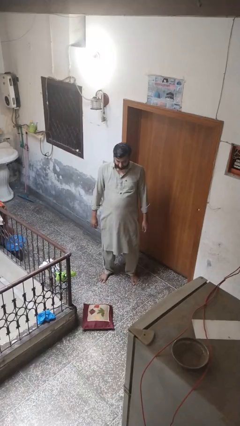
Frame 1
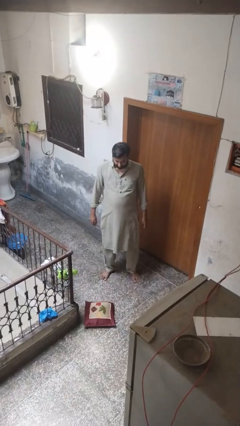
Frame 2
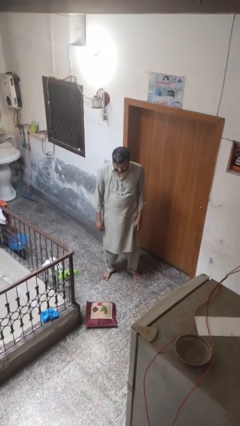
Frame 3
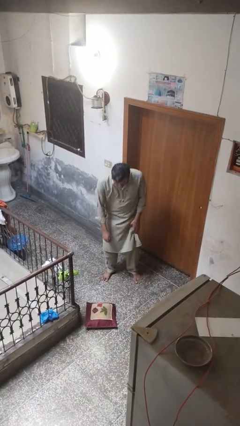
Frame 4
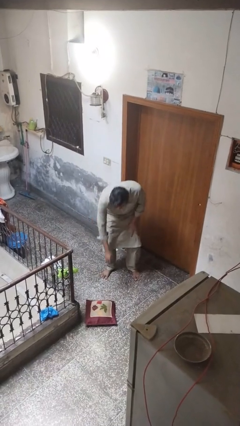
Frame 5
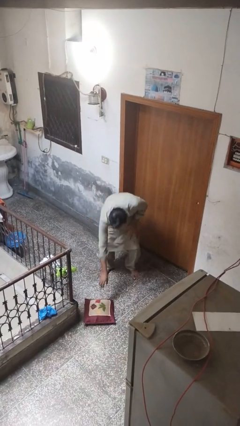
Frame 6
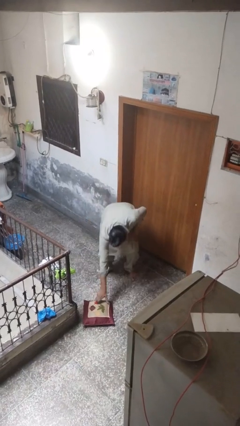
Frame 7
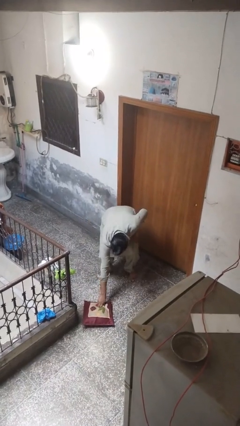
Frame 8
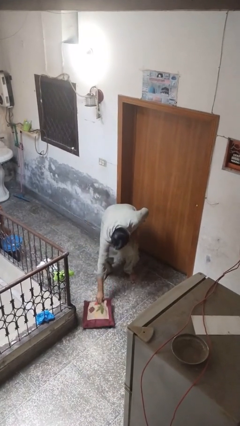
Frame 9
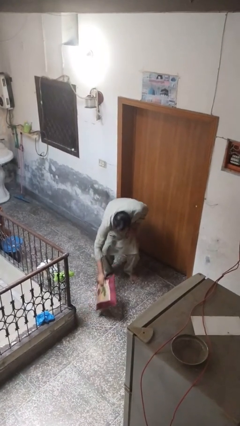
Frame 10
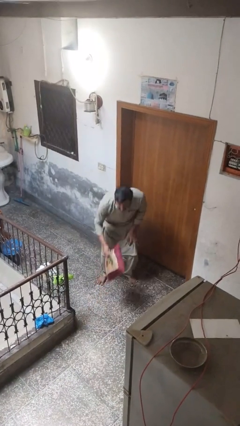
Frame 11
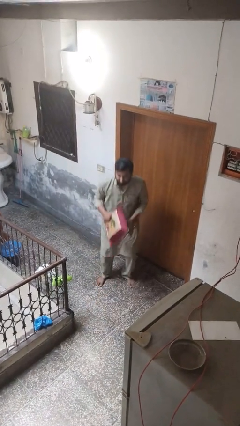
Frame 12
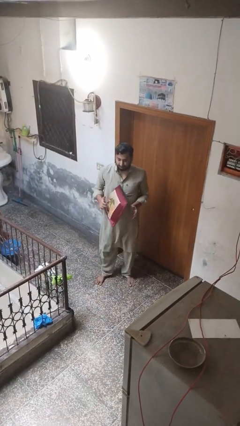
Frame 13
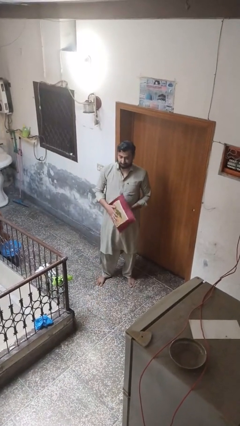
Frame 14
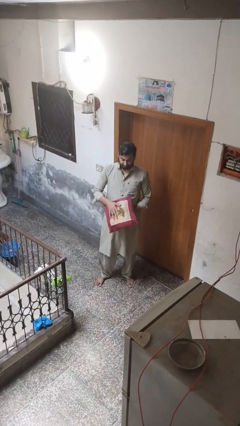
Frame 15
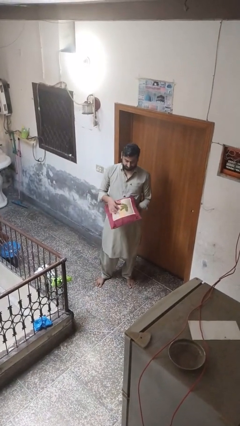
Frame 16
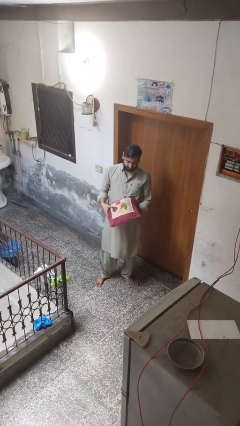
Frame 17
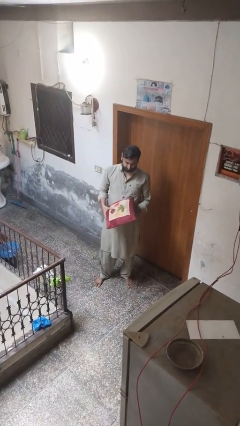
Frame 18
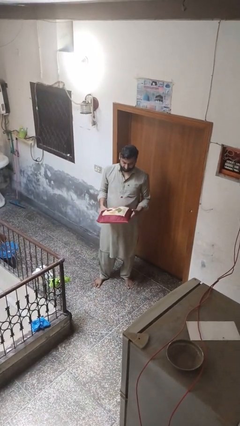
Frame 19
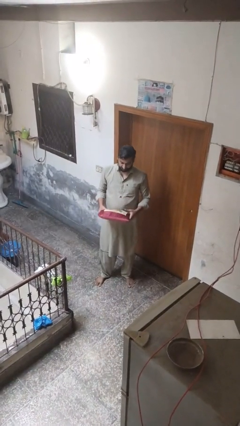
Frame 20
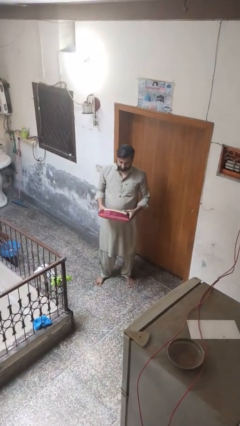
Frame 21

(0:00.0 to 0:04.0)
person picks up object from floor

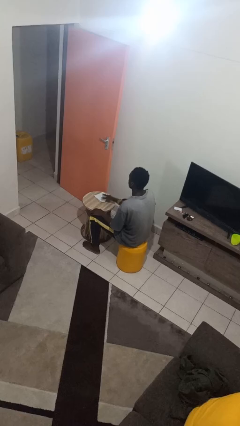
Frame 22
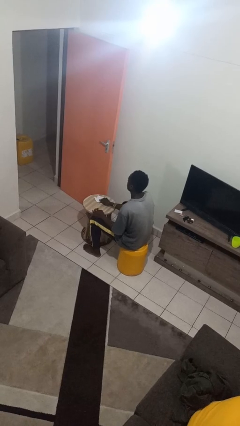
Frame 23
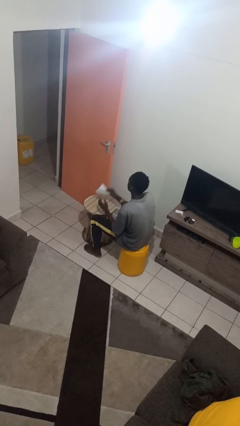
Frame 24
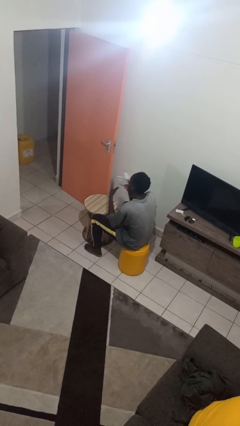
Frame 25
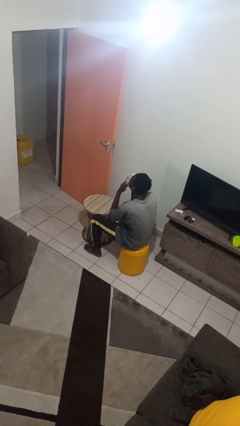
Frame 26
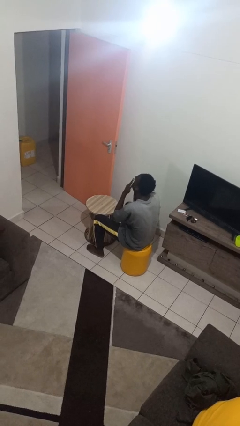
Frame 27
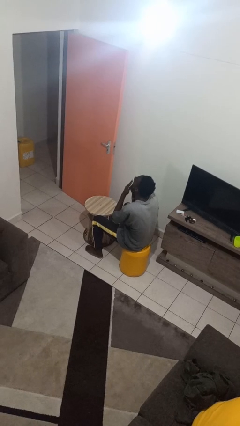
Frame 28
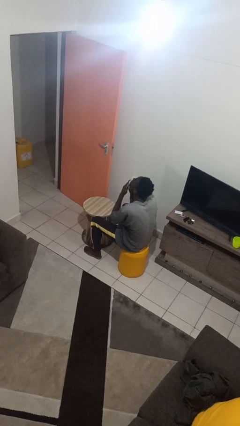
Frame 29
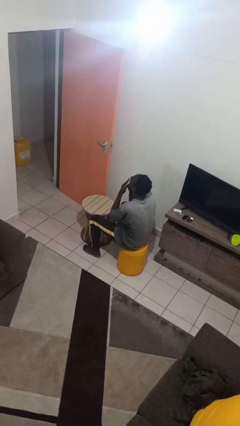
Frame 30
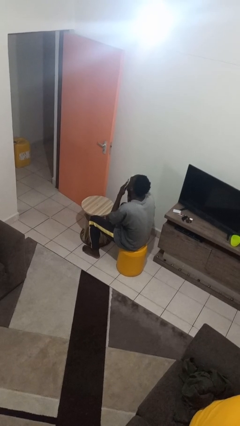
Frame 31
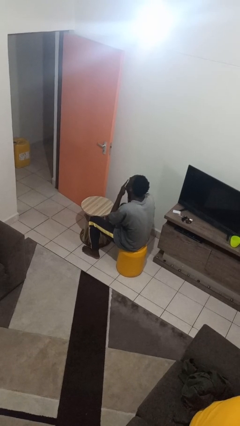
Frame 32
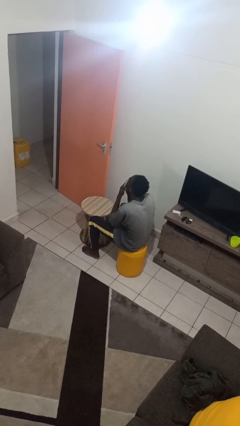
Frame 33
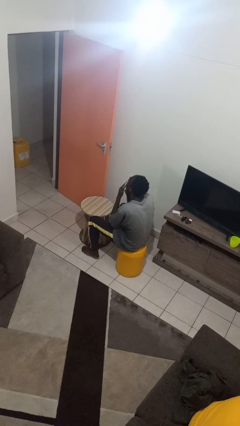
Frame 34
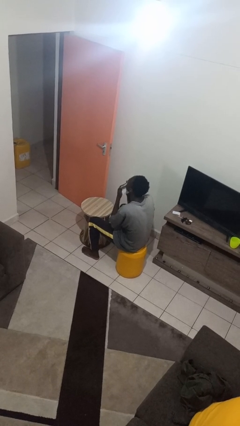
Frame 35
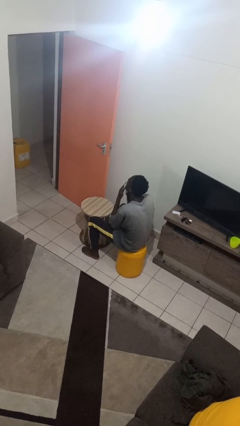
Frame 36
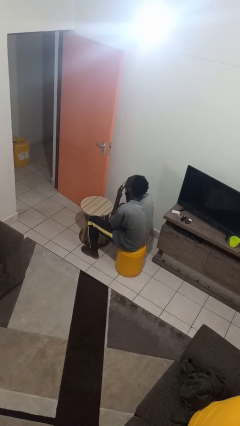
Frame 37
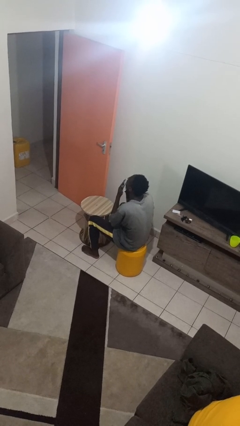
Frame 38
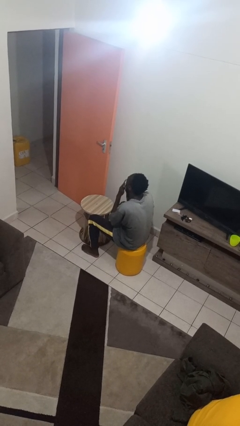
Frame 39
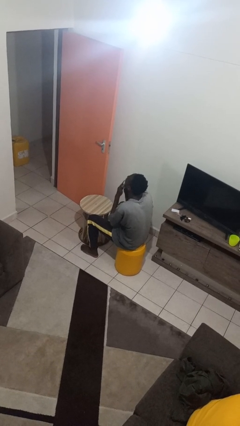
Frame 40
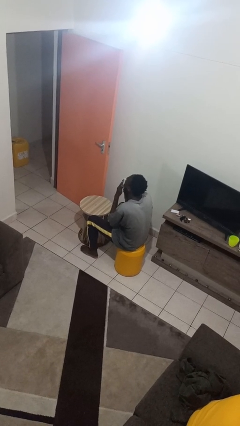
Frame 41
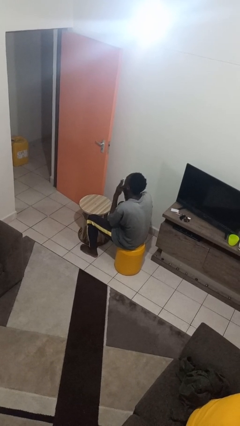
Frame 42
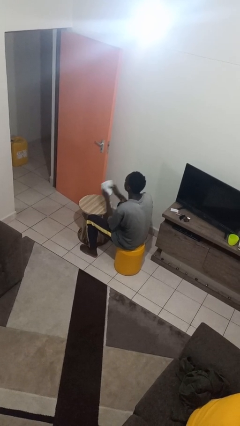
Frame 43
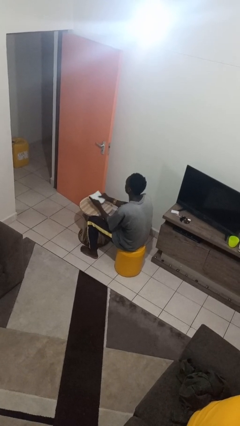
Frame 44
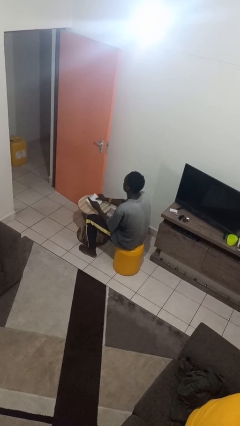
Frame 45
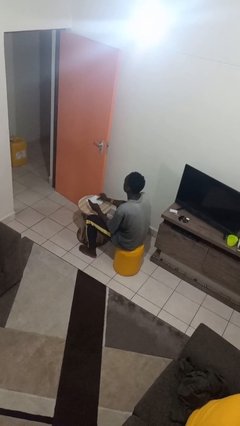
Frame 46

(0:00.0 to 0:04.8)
person wipes mouth with napkin

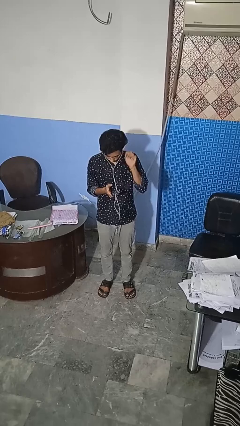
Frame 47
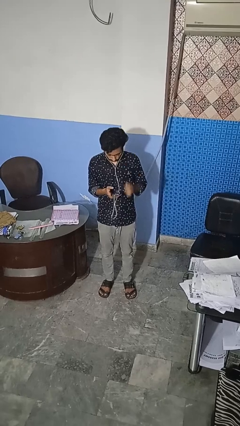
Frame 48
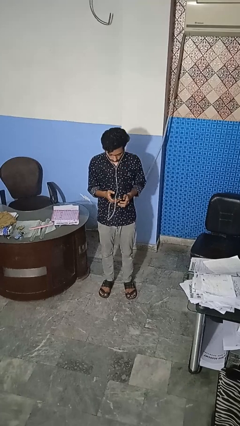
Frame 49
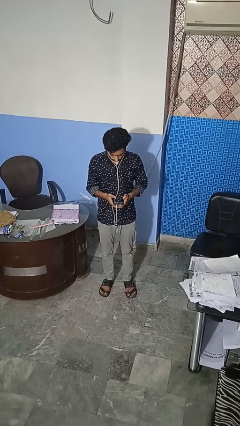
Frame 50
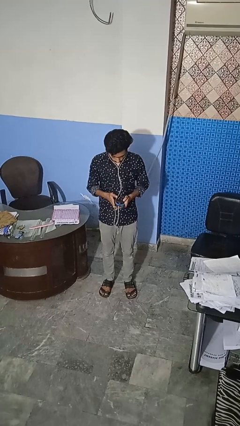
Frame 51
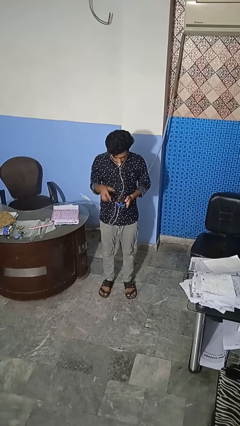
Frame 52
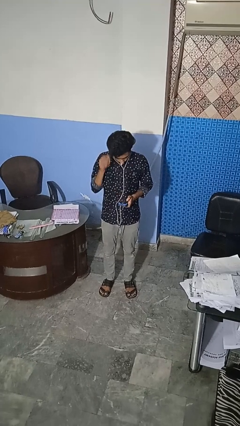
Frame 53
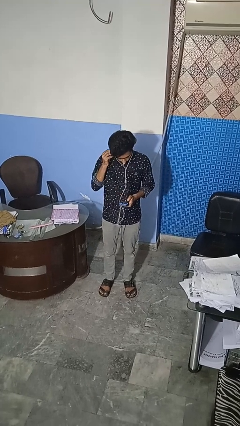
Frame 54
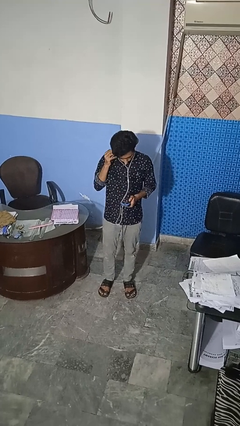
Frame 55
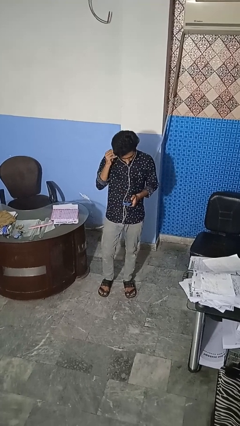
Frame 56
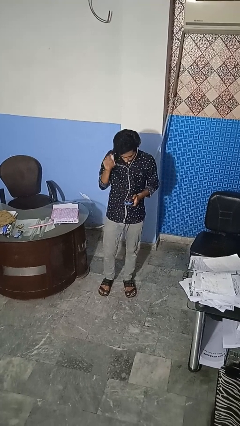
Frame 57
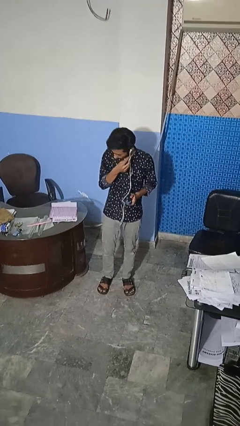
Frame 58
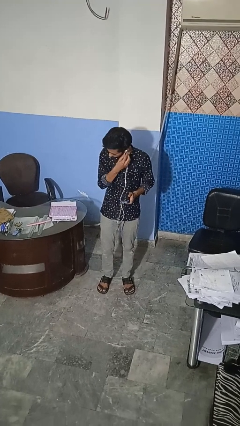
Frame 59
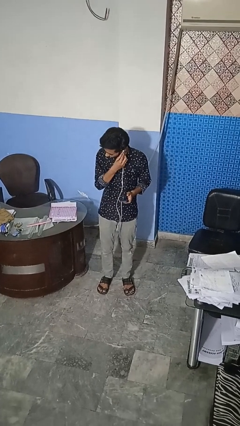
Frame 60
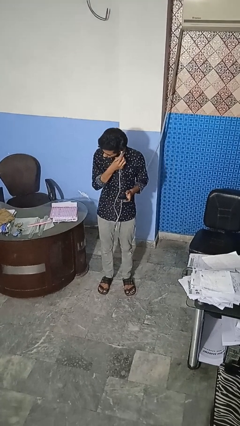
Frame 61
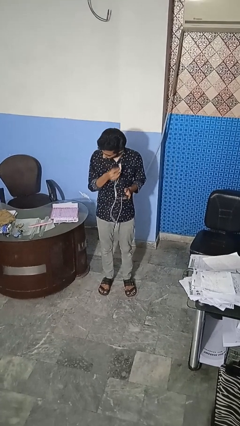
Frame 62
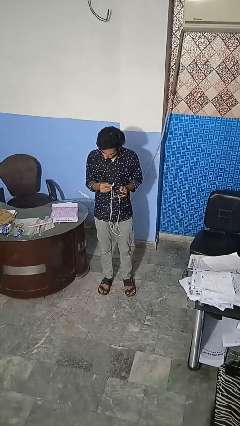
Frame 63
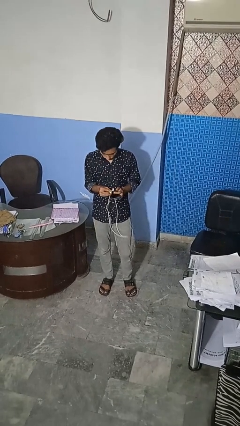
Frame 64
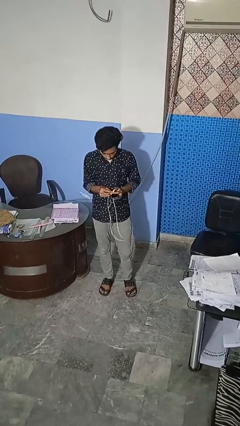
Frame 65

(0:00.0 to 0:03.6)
person takes off headphones

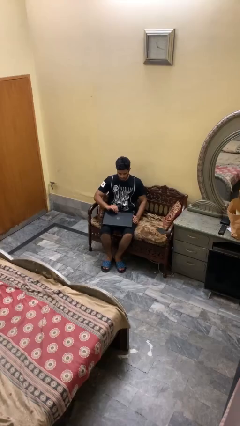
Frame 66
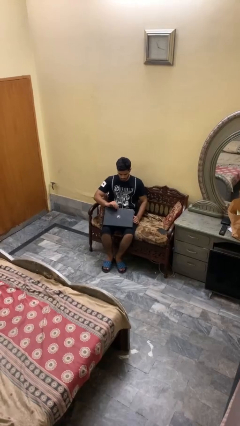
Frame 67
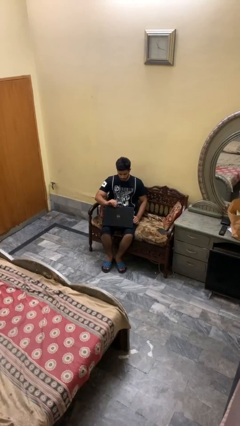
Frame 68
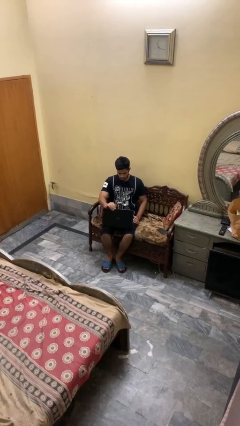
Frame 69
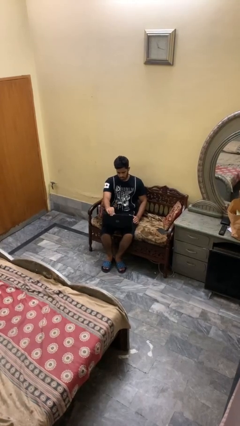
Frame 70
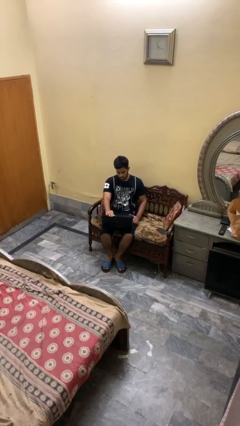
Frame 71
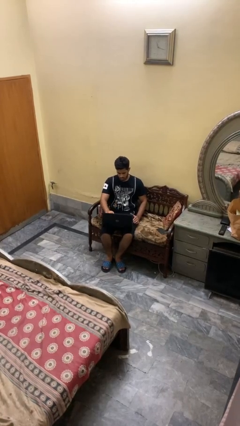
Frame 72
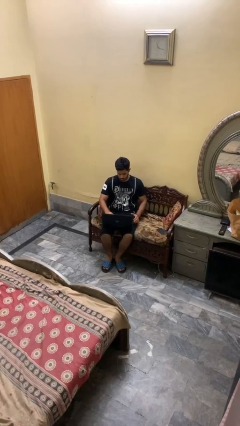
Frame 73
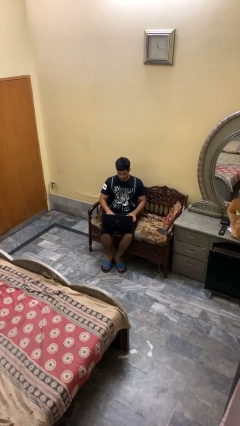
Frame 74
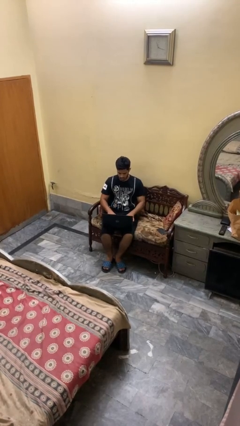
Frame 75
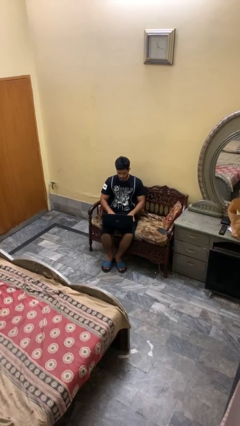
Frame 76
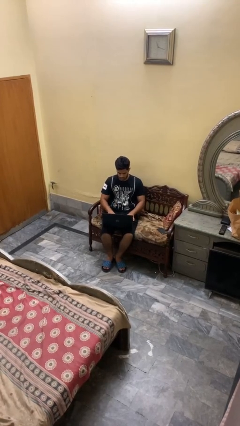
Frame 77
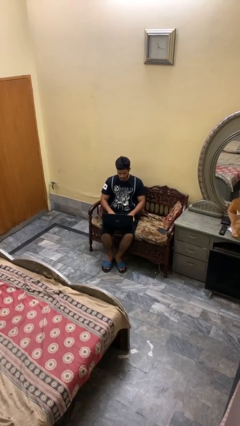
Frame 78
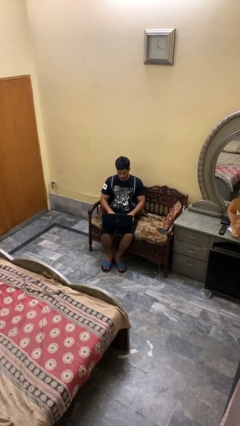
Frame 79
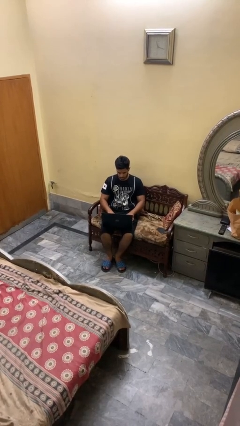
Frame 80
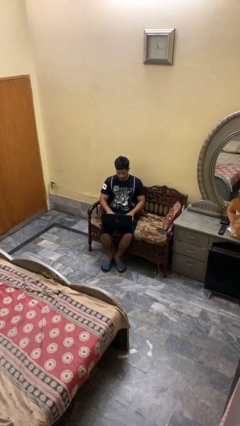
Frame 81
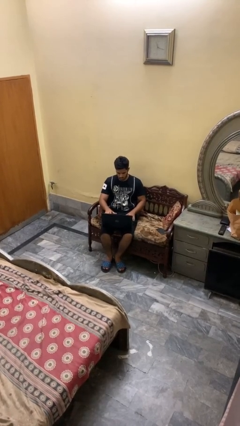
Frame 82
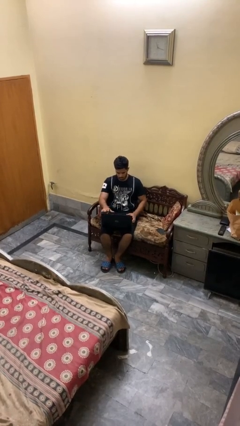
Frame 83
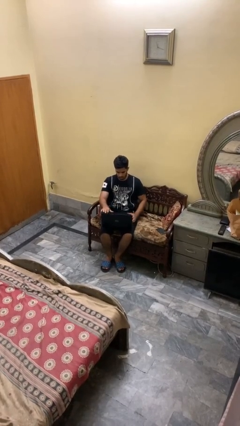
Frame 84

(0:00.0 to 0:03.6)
person opens laptop

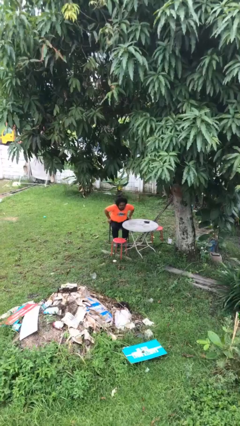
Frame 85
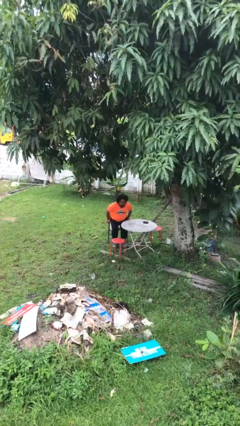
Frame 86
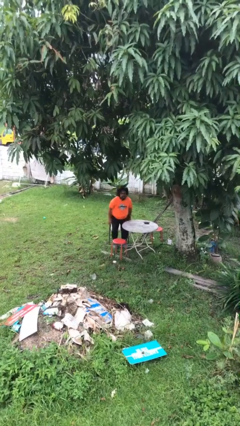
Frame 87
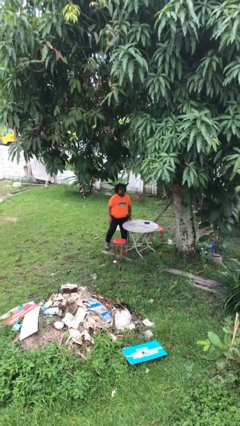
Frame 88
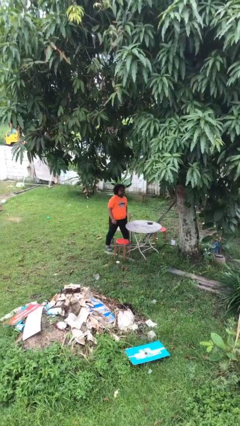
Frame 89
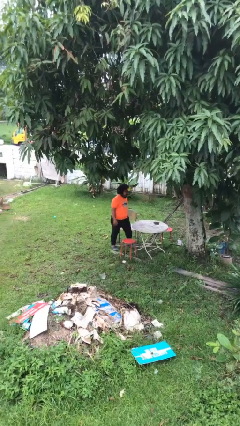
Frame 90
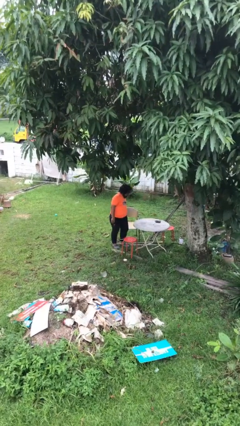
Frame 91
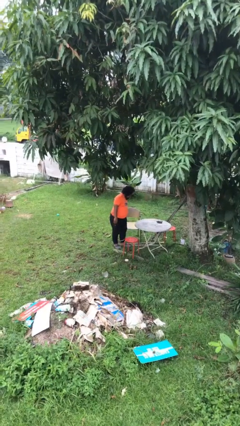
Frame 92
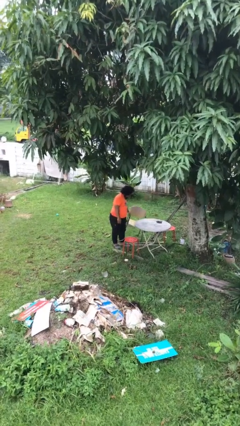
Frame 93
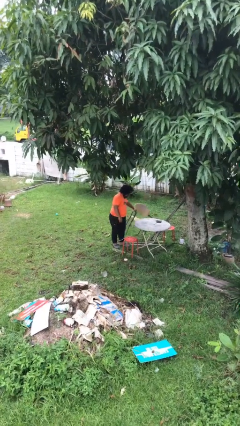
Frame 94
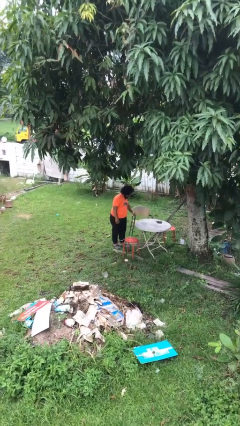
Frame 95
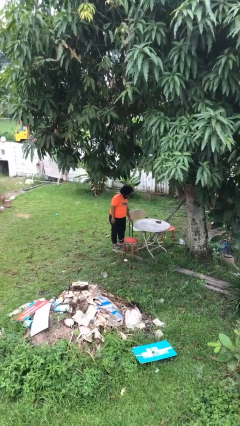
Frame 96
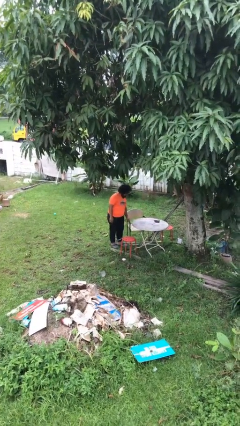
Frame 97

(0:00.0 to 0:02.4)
person stands up
